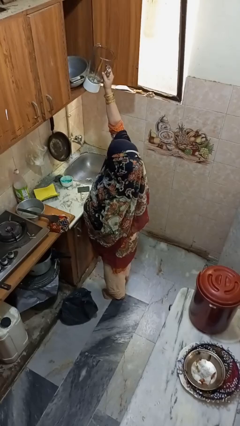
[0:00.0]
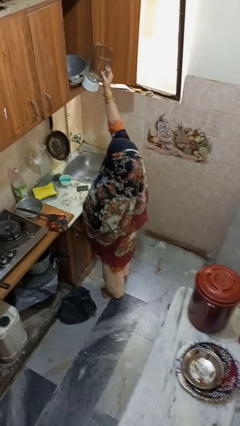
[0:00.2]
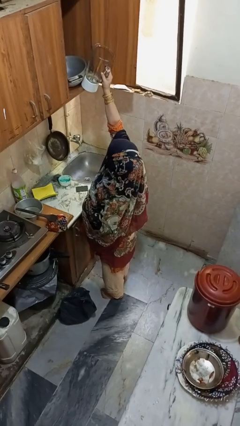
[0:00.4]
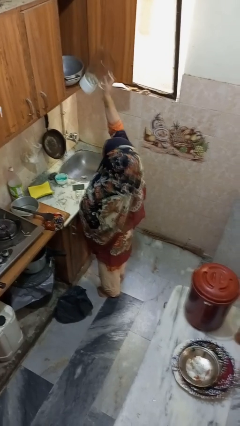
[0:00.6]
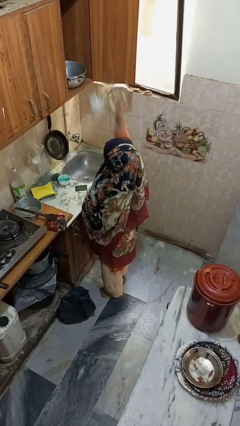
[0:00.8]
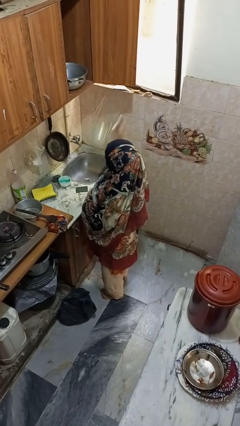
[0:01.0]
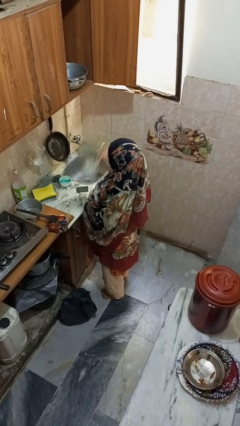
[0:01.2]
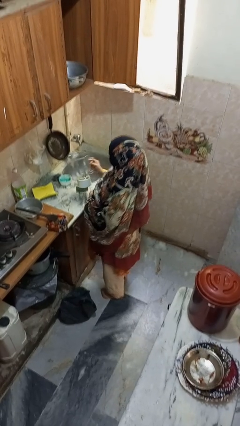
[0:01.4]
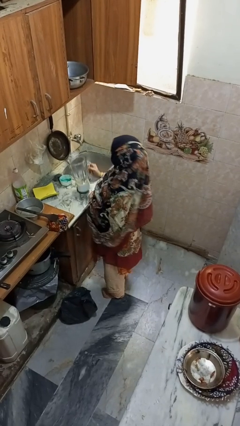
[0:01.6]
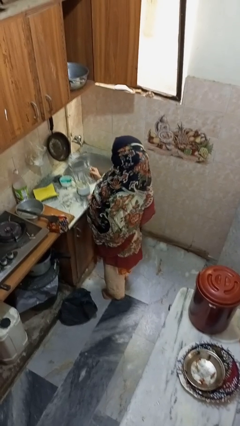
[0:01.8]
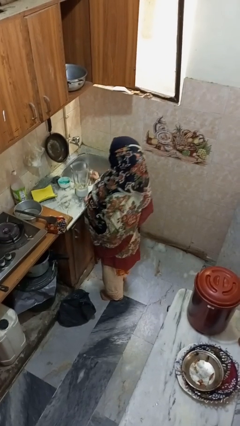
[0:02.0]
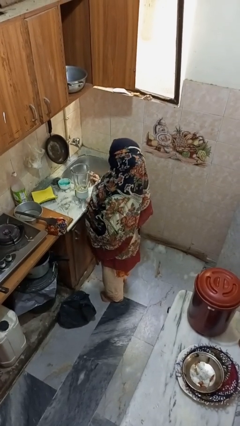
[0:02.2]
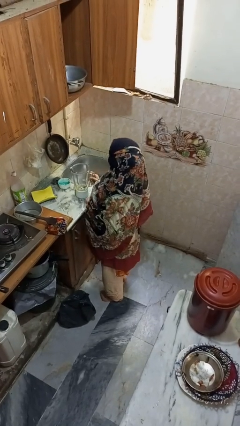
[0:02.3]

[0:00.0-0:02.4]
person puts object in cabinet

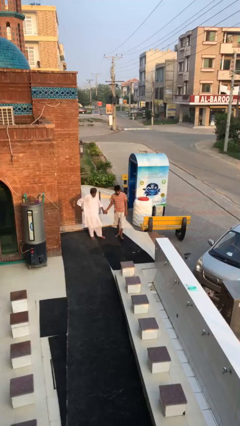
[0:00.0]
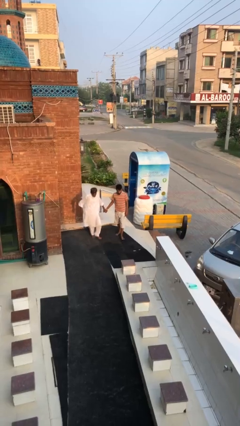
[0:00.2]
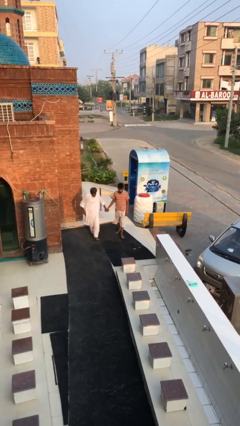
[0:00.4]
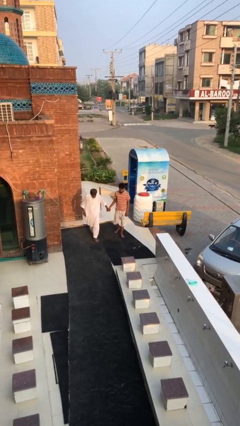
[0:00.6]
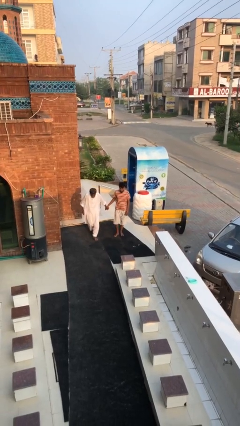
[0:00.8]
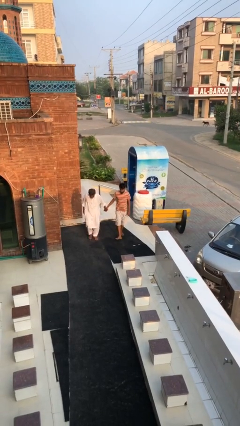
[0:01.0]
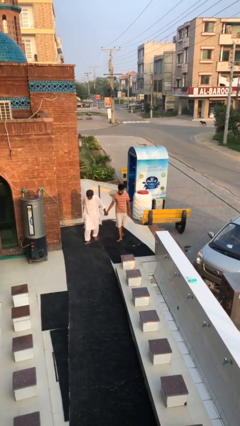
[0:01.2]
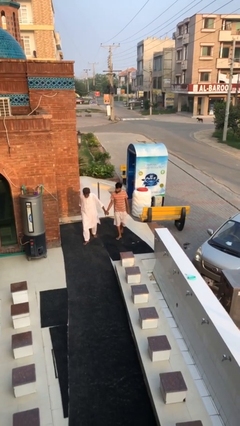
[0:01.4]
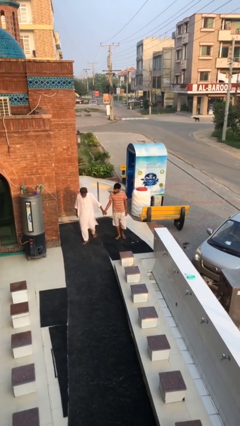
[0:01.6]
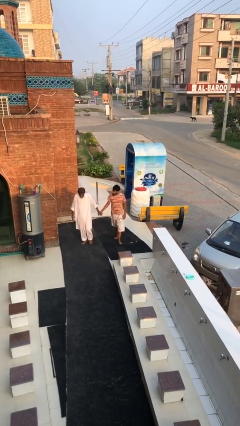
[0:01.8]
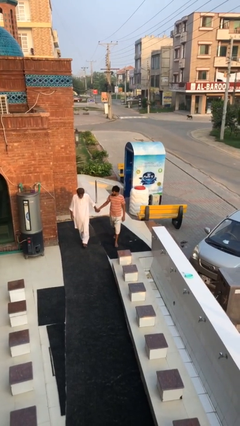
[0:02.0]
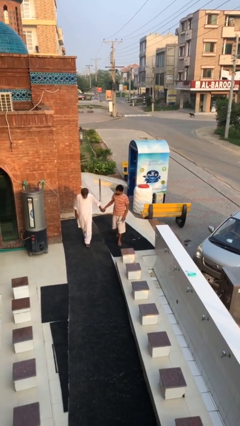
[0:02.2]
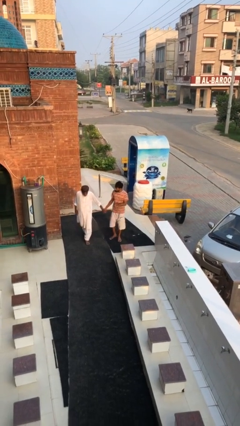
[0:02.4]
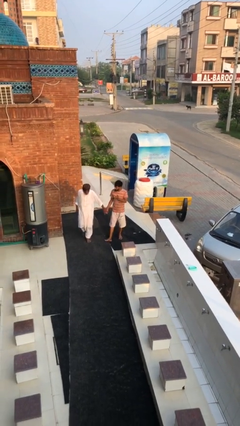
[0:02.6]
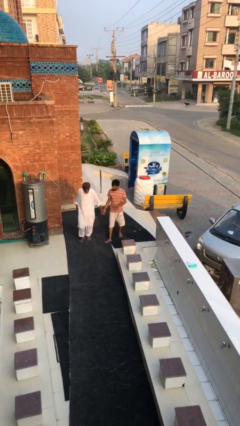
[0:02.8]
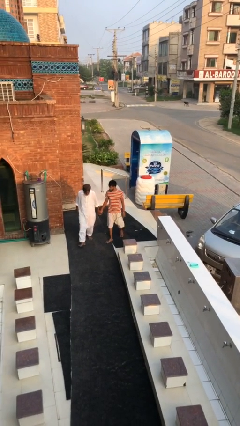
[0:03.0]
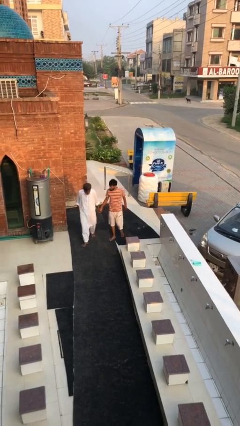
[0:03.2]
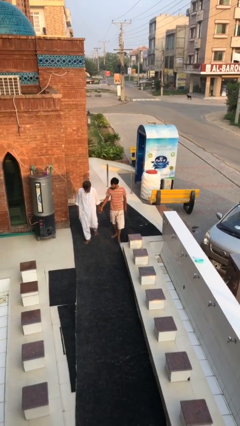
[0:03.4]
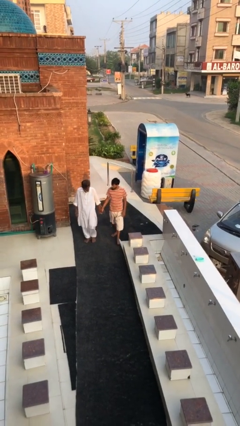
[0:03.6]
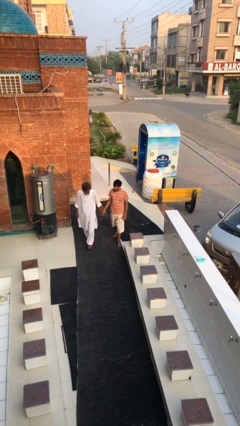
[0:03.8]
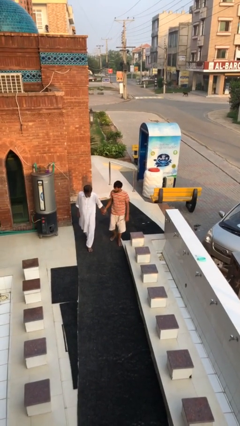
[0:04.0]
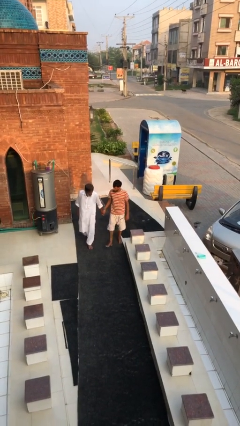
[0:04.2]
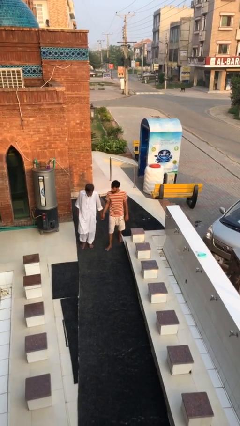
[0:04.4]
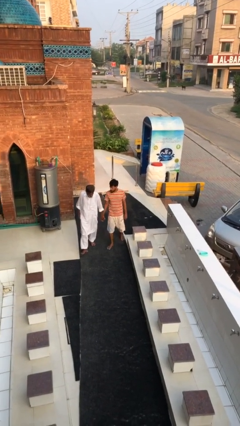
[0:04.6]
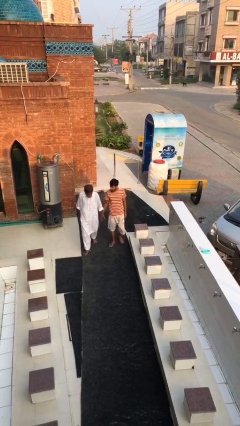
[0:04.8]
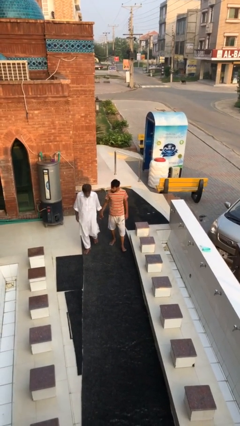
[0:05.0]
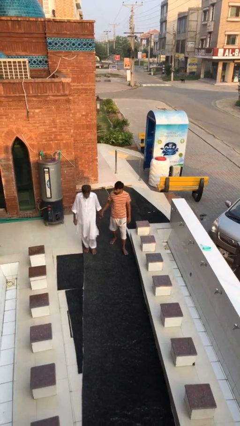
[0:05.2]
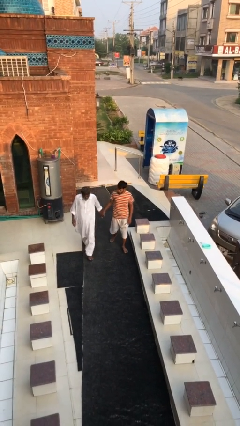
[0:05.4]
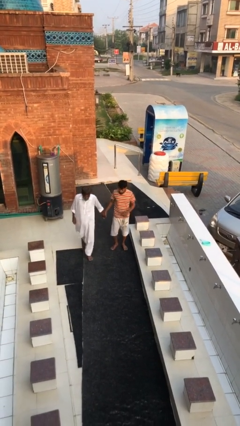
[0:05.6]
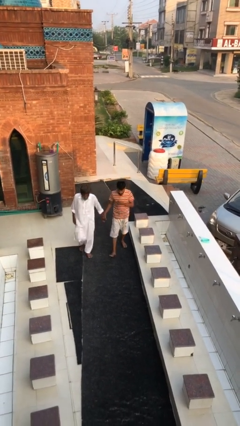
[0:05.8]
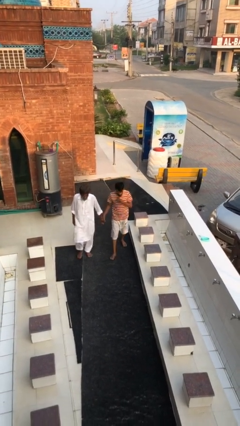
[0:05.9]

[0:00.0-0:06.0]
person holds hand

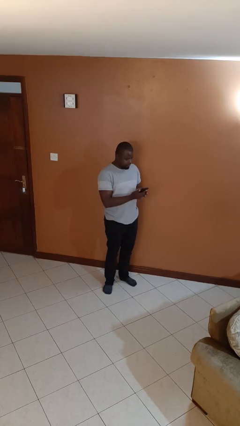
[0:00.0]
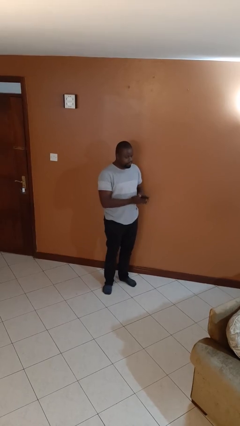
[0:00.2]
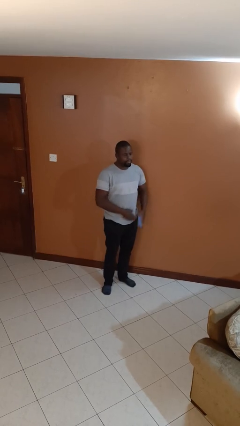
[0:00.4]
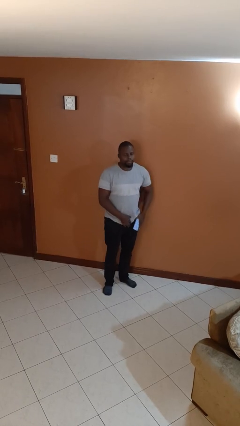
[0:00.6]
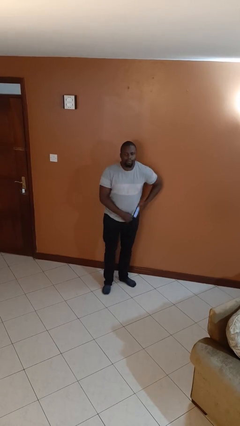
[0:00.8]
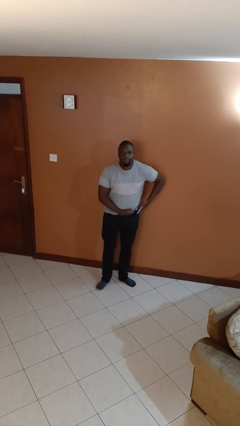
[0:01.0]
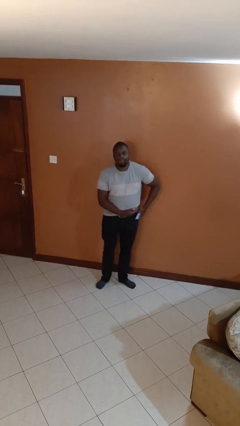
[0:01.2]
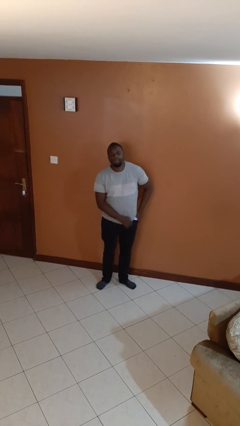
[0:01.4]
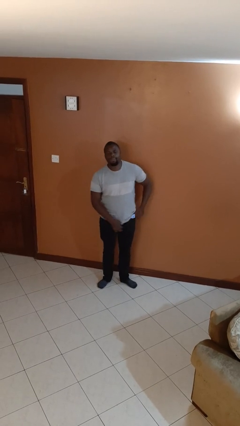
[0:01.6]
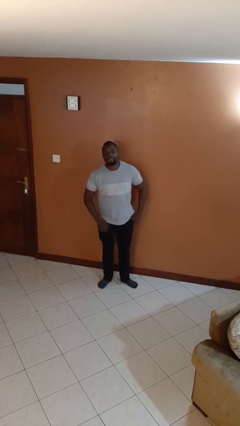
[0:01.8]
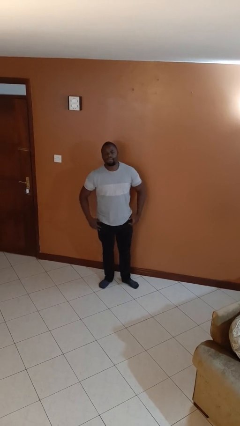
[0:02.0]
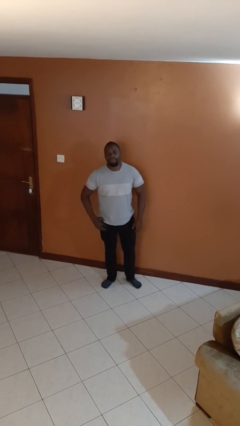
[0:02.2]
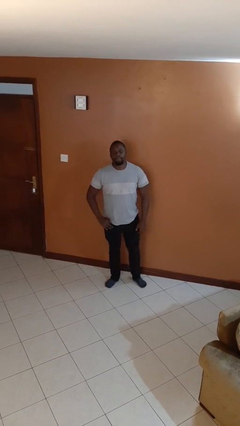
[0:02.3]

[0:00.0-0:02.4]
person puts phone into pocket

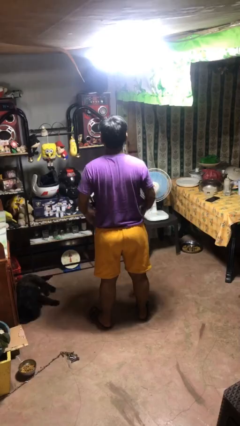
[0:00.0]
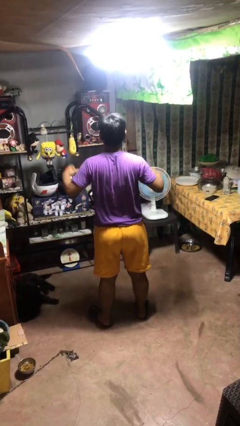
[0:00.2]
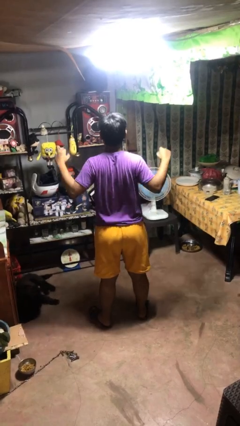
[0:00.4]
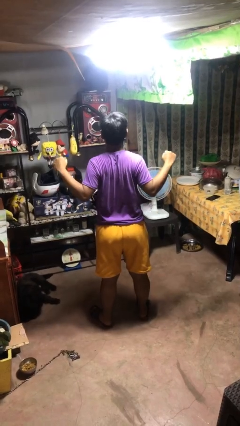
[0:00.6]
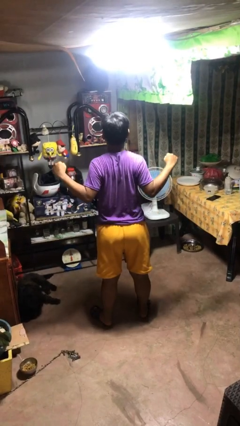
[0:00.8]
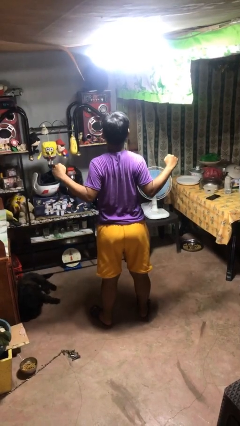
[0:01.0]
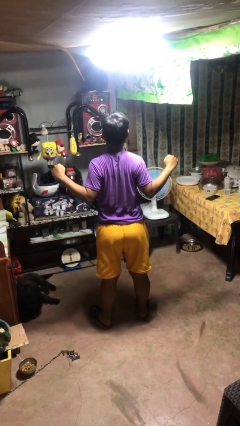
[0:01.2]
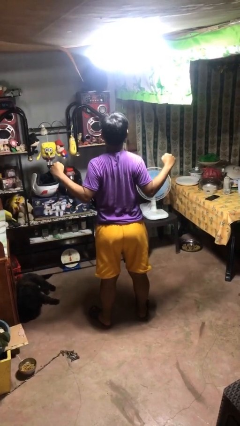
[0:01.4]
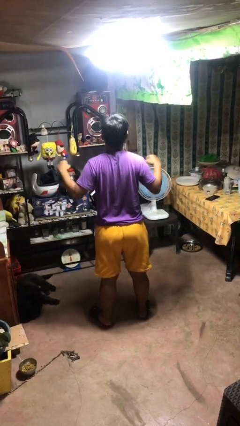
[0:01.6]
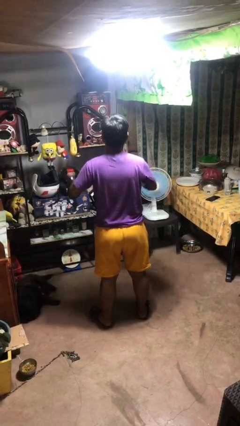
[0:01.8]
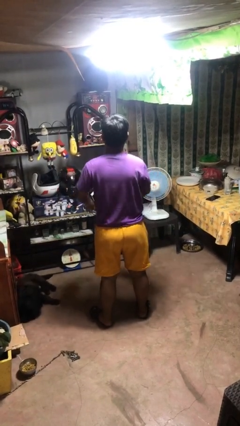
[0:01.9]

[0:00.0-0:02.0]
person stretches back

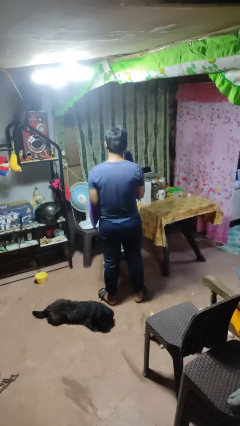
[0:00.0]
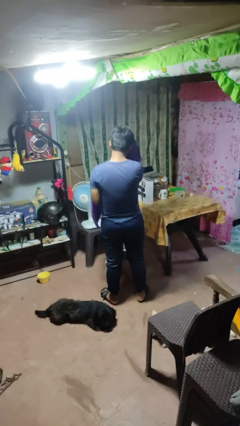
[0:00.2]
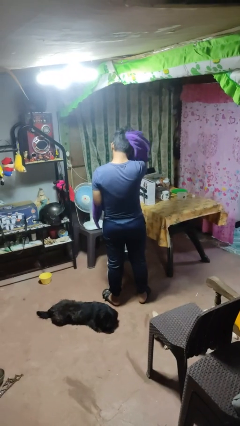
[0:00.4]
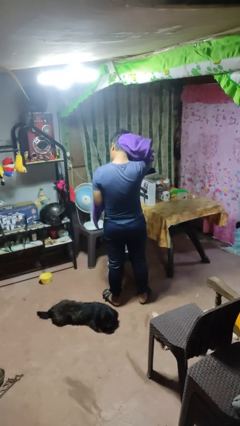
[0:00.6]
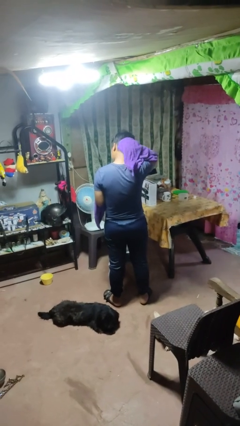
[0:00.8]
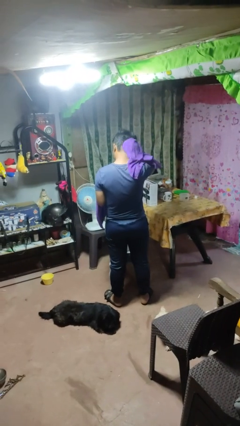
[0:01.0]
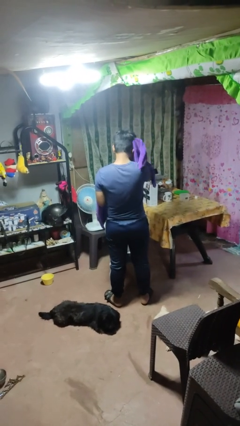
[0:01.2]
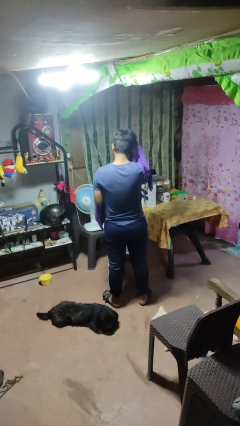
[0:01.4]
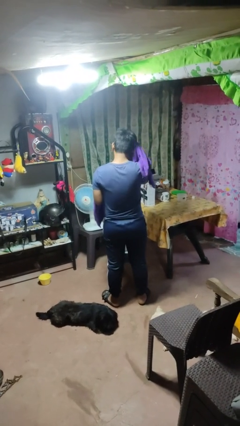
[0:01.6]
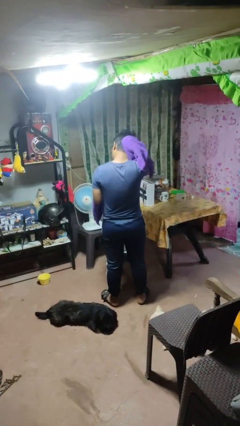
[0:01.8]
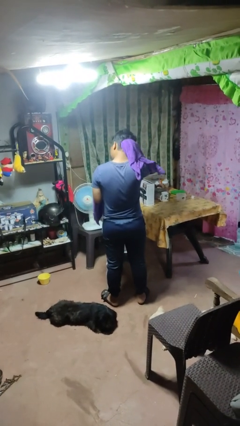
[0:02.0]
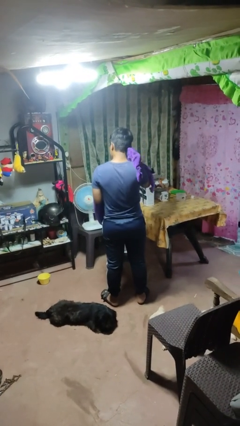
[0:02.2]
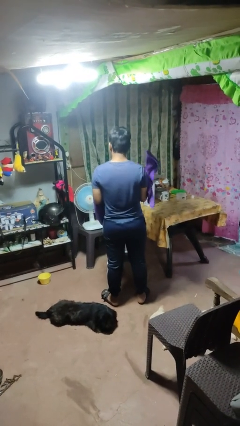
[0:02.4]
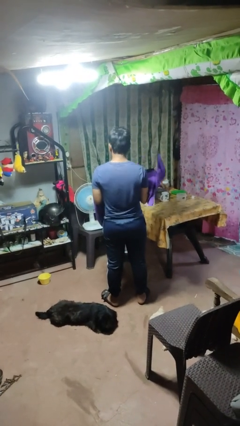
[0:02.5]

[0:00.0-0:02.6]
person dries hair with towel

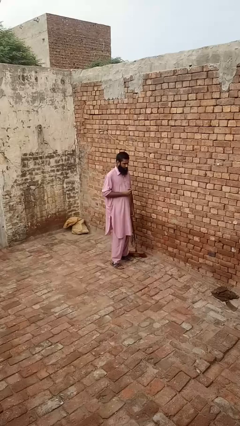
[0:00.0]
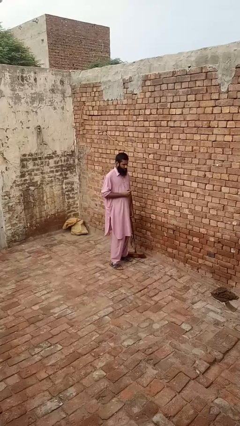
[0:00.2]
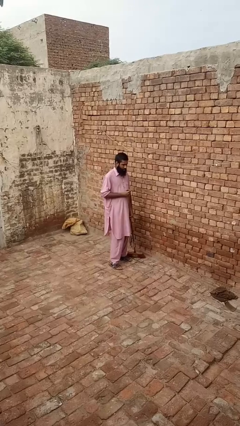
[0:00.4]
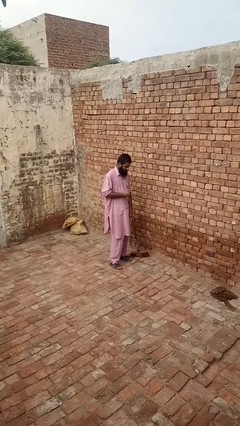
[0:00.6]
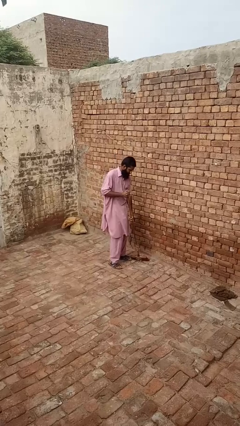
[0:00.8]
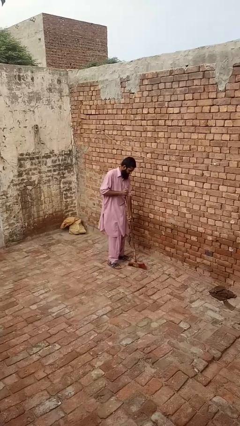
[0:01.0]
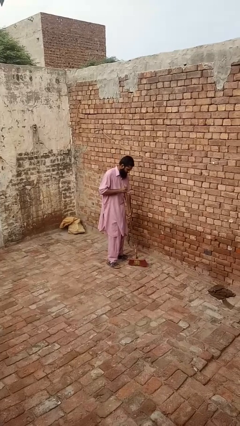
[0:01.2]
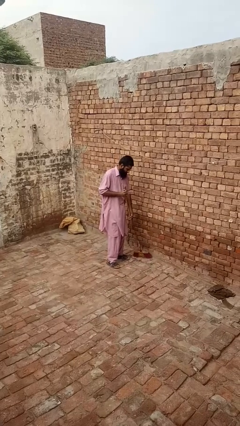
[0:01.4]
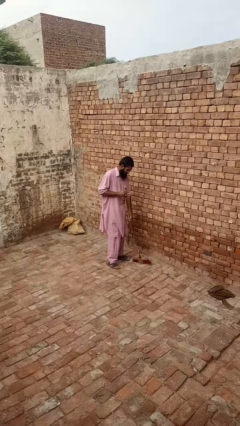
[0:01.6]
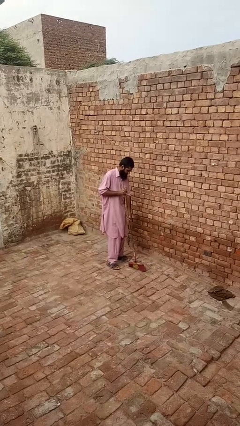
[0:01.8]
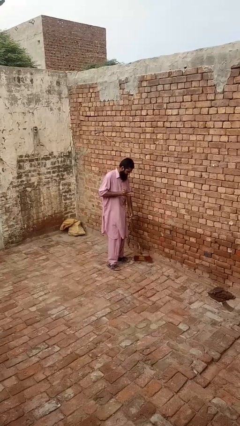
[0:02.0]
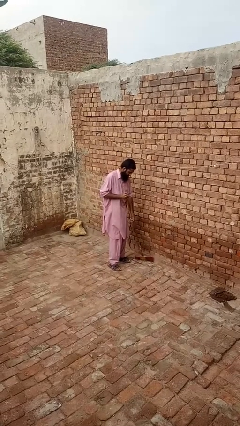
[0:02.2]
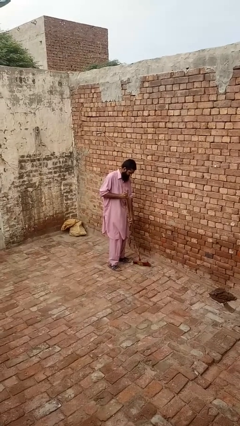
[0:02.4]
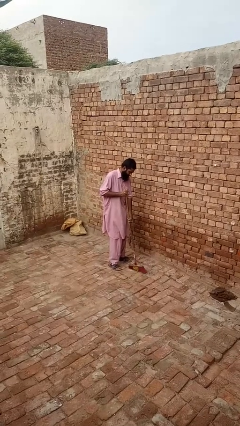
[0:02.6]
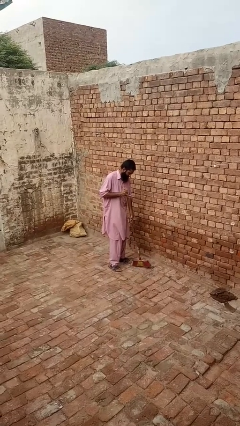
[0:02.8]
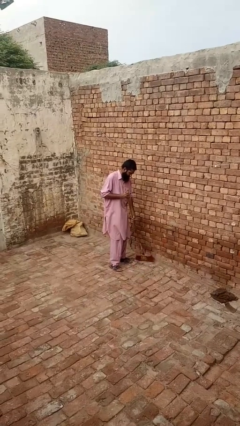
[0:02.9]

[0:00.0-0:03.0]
person sweeps floor
